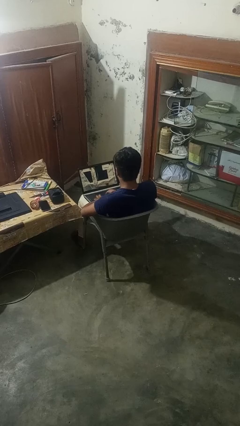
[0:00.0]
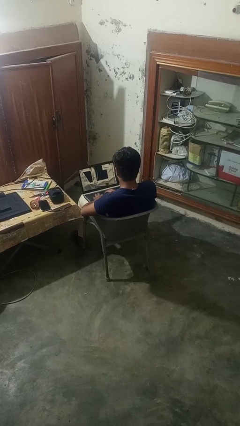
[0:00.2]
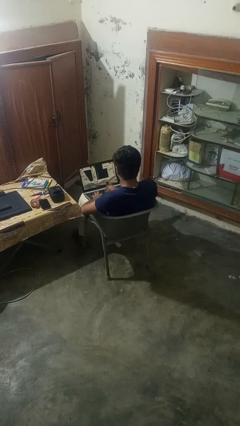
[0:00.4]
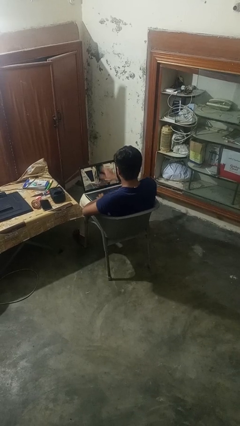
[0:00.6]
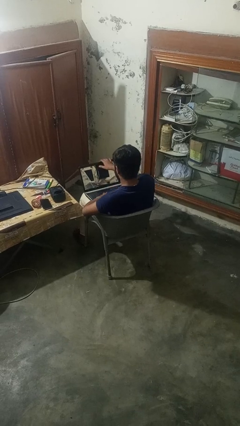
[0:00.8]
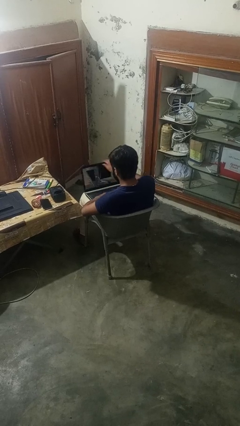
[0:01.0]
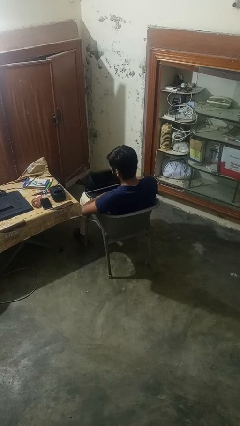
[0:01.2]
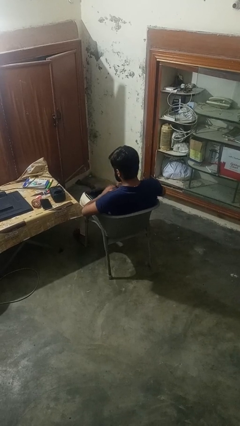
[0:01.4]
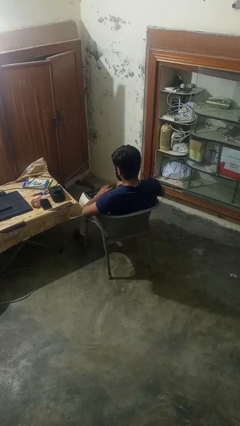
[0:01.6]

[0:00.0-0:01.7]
person closes laptop

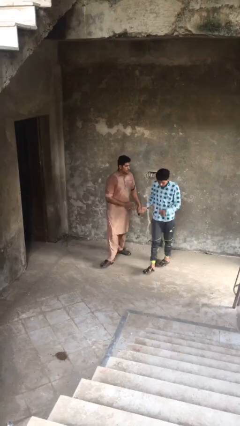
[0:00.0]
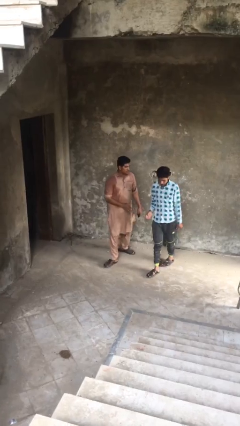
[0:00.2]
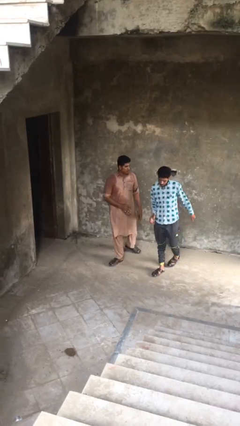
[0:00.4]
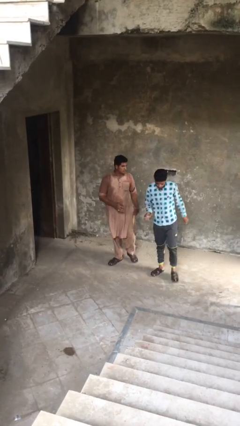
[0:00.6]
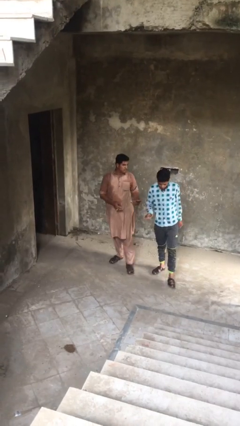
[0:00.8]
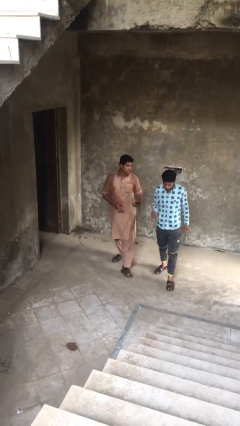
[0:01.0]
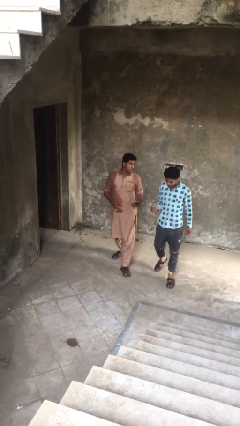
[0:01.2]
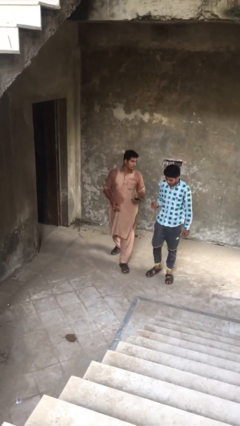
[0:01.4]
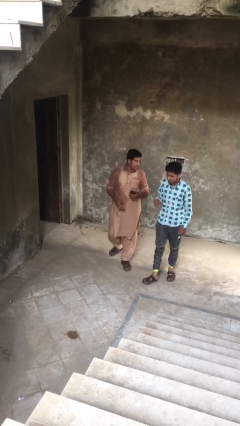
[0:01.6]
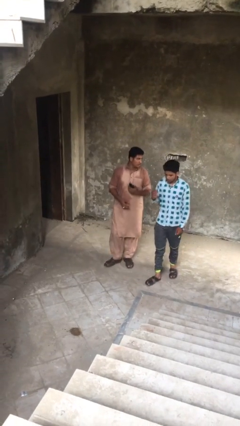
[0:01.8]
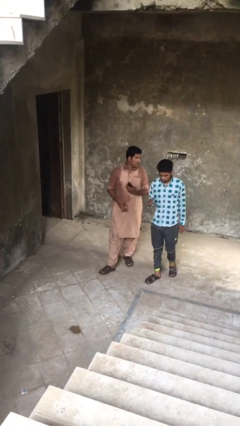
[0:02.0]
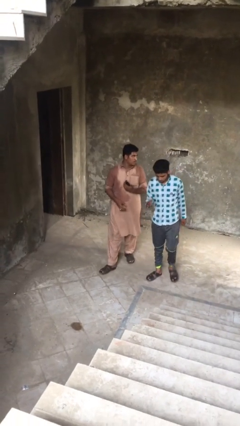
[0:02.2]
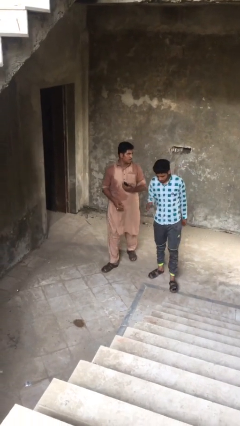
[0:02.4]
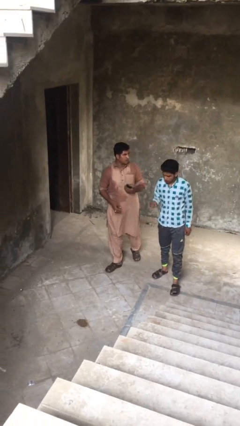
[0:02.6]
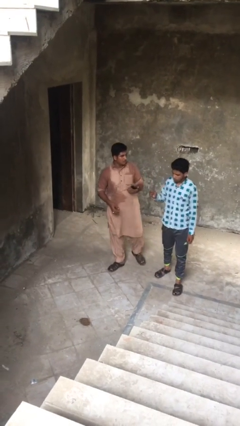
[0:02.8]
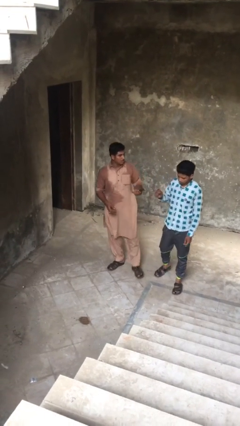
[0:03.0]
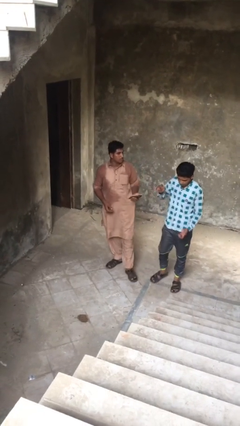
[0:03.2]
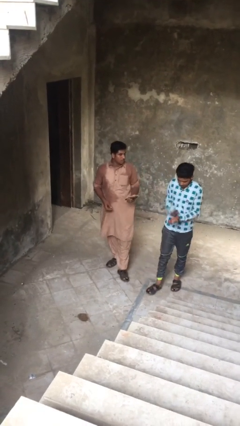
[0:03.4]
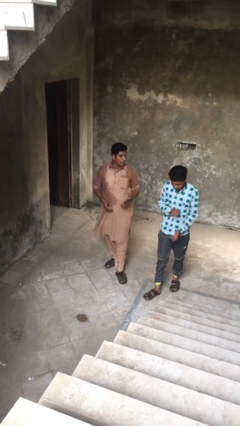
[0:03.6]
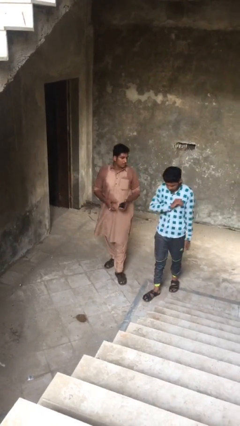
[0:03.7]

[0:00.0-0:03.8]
person talks to person

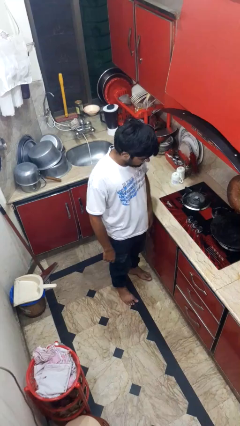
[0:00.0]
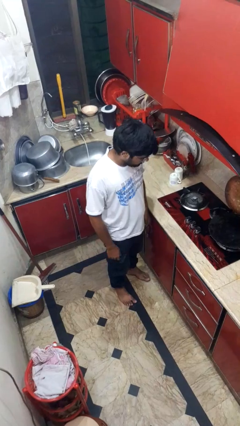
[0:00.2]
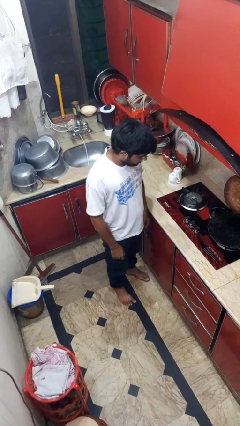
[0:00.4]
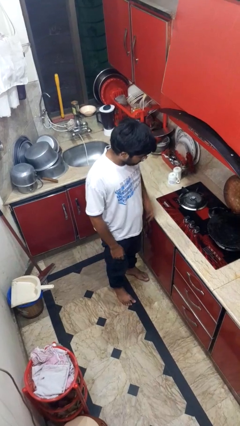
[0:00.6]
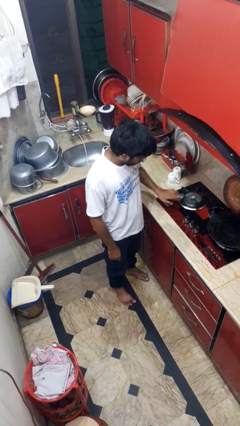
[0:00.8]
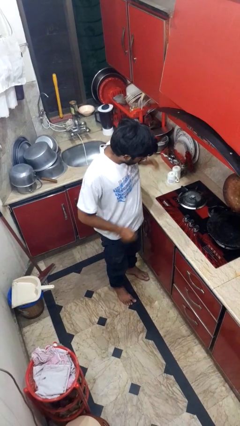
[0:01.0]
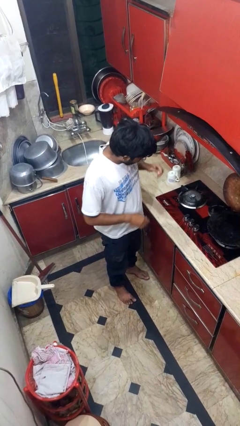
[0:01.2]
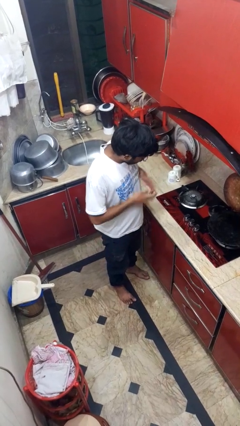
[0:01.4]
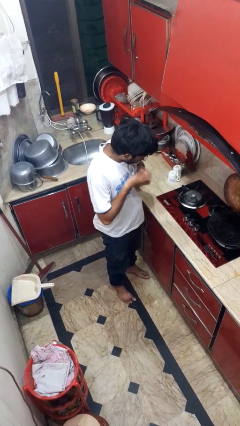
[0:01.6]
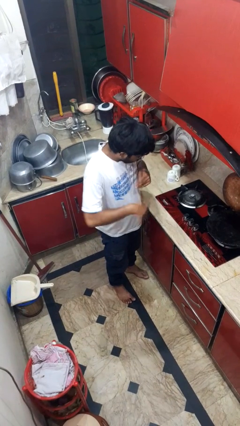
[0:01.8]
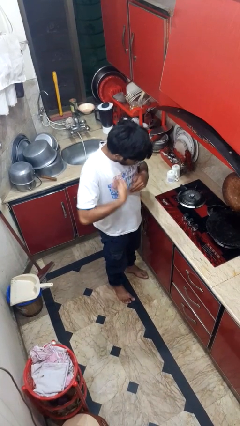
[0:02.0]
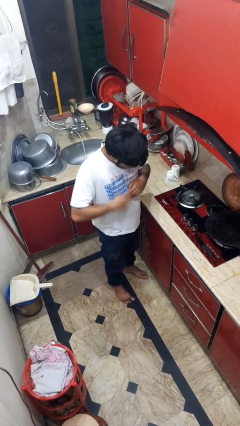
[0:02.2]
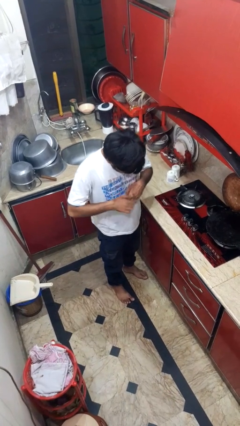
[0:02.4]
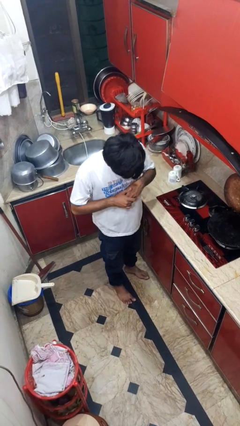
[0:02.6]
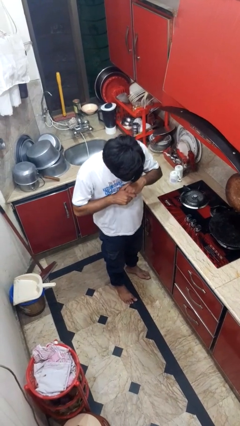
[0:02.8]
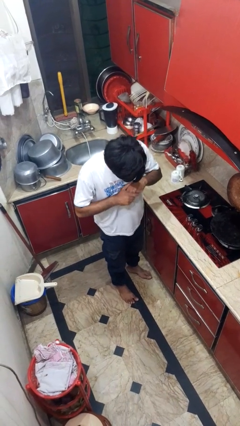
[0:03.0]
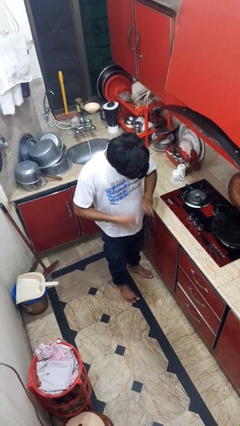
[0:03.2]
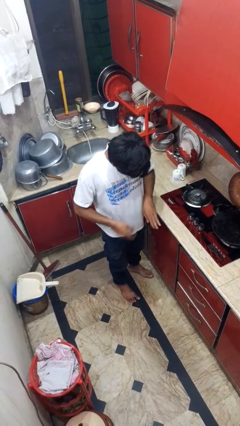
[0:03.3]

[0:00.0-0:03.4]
person burns hand

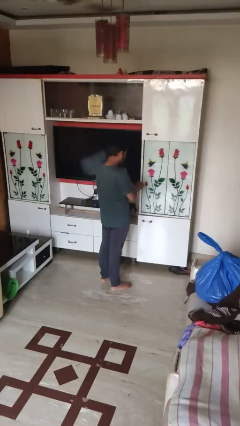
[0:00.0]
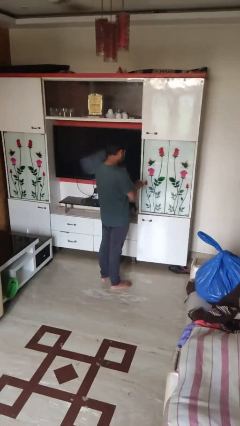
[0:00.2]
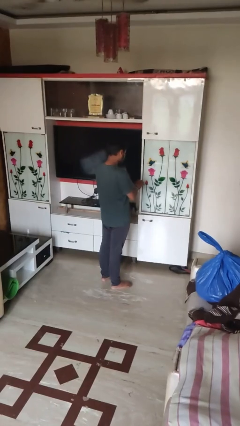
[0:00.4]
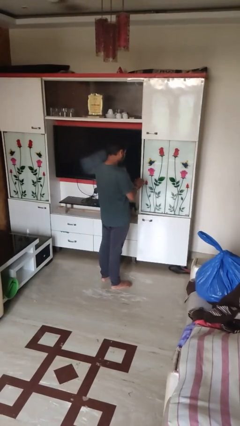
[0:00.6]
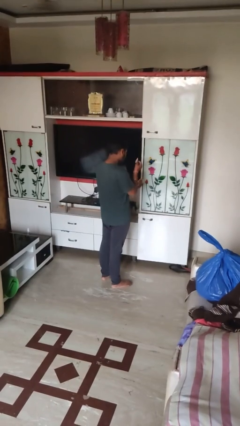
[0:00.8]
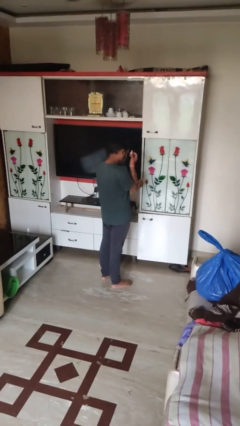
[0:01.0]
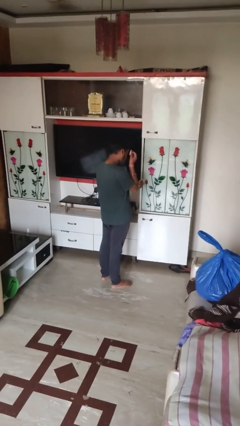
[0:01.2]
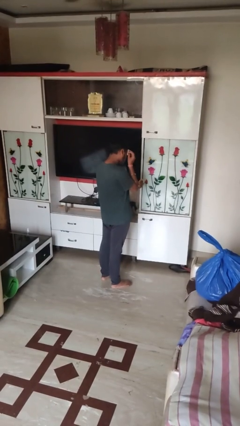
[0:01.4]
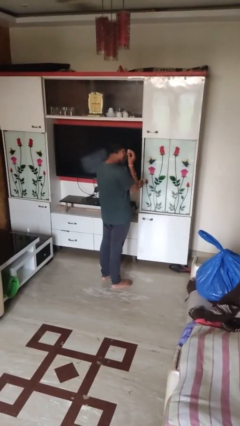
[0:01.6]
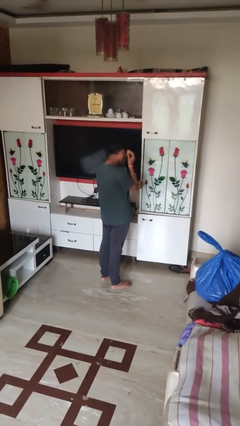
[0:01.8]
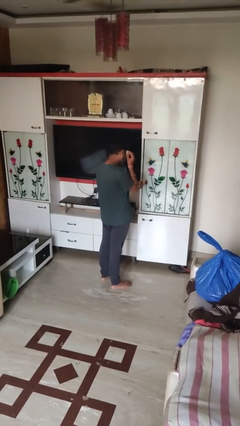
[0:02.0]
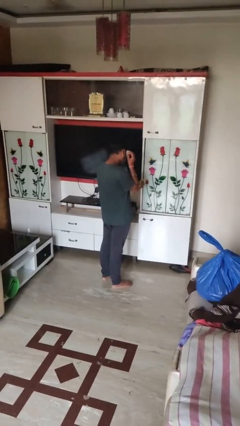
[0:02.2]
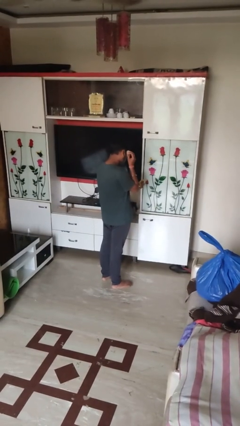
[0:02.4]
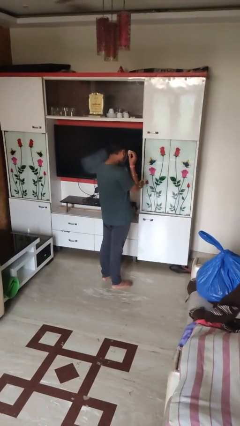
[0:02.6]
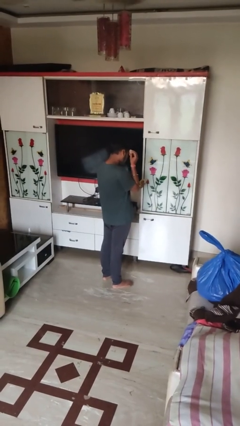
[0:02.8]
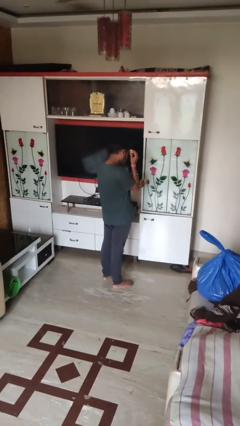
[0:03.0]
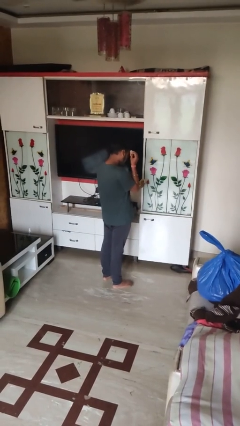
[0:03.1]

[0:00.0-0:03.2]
person applies foundation makeup

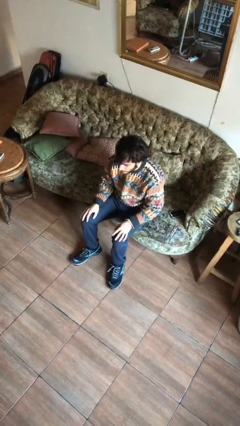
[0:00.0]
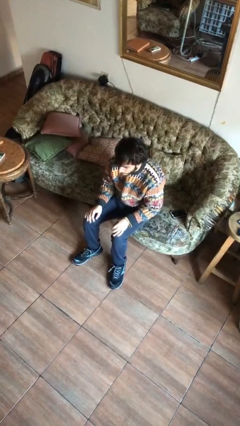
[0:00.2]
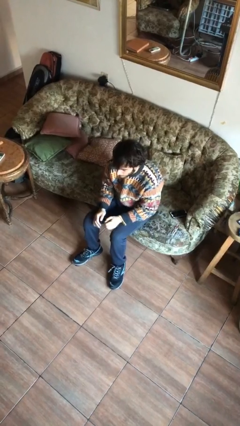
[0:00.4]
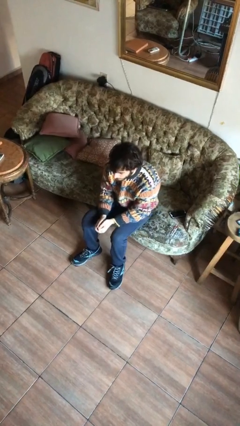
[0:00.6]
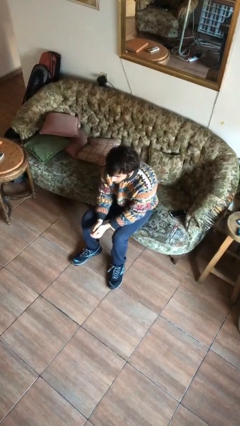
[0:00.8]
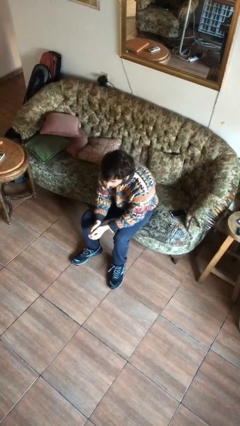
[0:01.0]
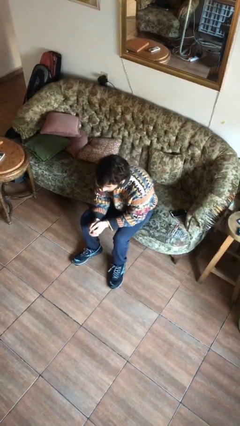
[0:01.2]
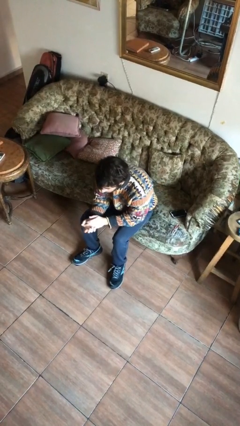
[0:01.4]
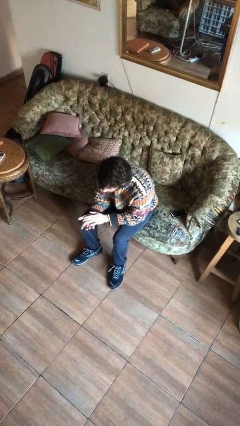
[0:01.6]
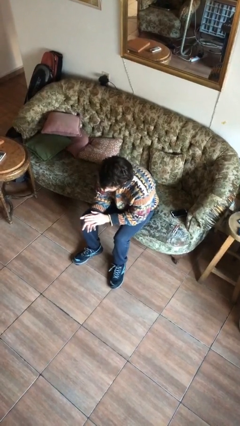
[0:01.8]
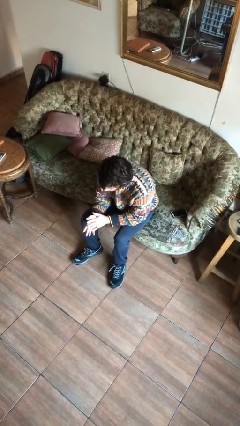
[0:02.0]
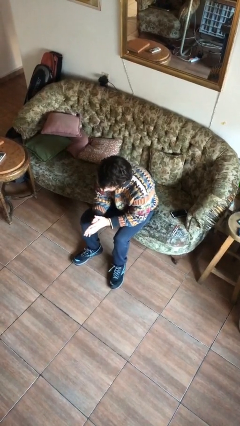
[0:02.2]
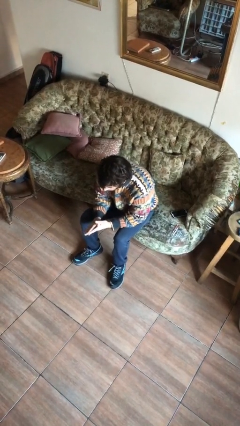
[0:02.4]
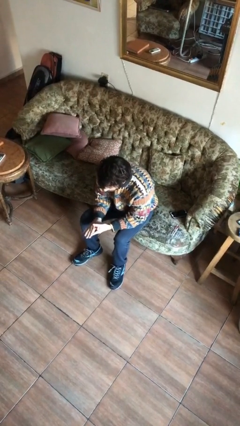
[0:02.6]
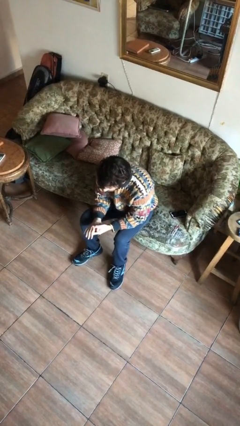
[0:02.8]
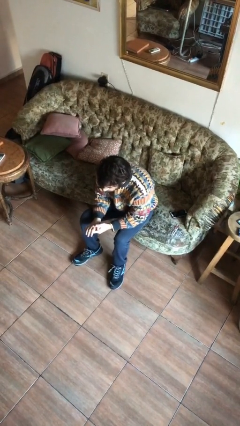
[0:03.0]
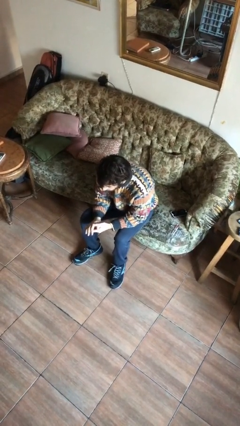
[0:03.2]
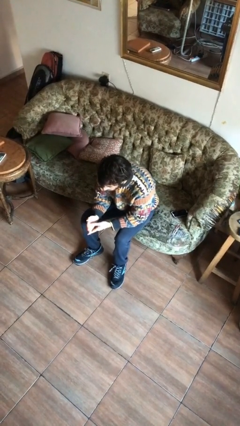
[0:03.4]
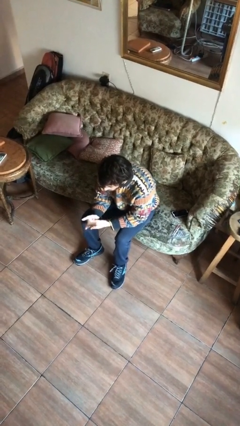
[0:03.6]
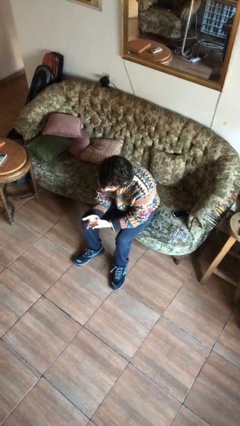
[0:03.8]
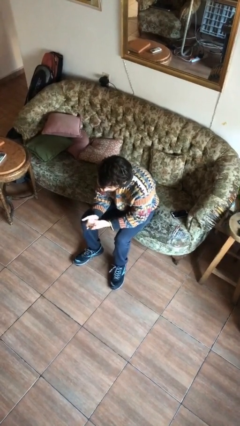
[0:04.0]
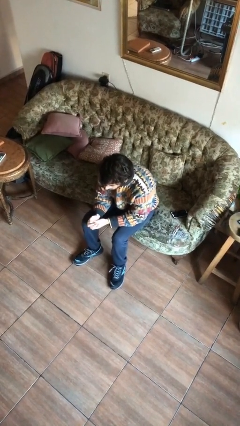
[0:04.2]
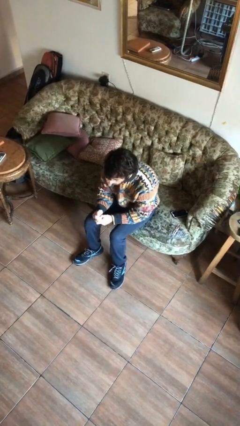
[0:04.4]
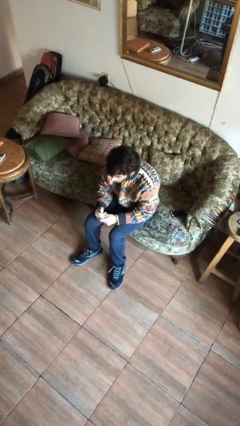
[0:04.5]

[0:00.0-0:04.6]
person looks at hands in lap

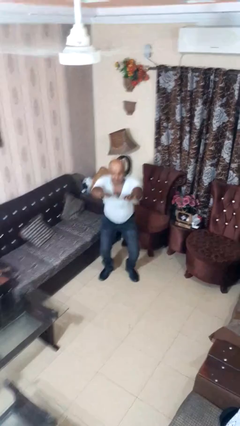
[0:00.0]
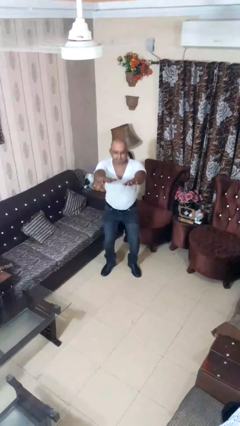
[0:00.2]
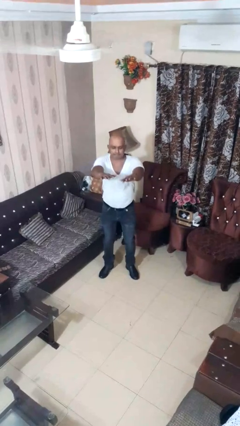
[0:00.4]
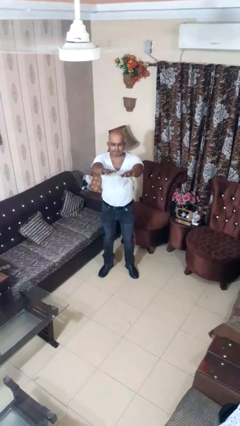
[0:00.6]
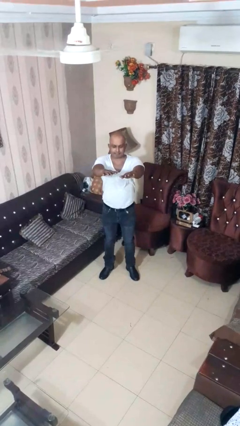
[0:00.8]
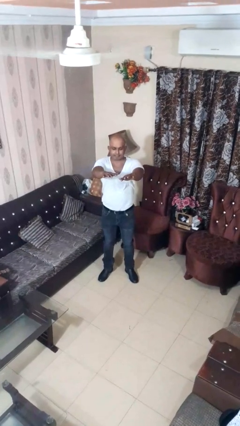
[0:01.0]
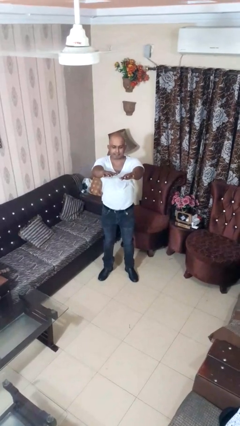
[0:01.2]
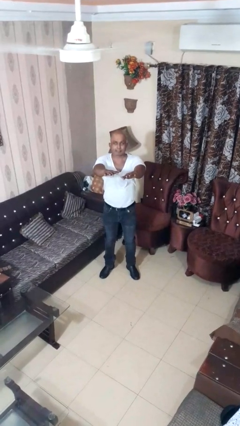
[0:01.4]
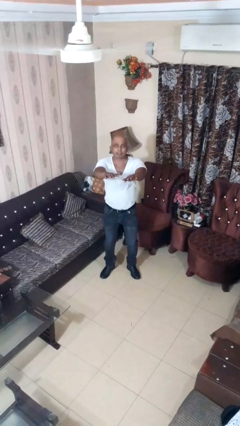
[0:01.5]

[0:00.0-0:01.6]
person stands up
